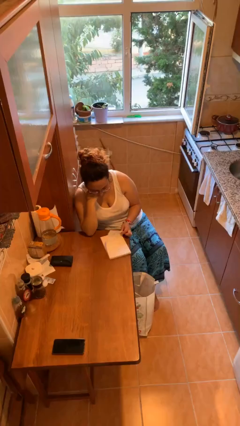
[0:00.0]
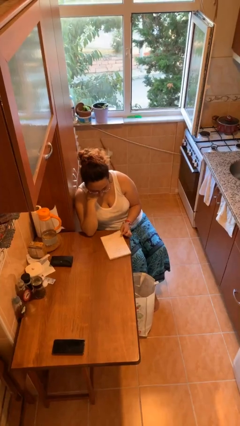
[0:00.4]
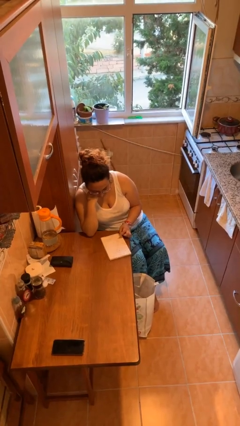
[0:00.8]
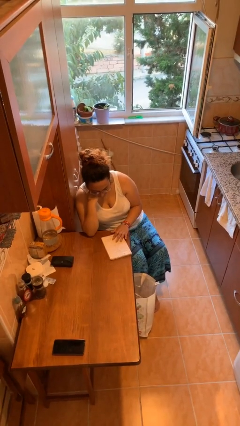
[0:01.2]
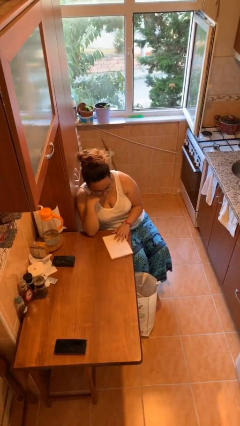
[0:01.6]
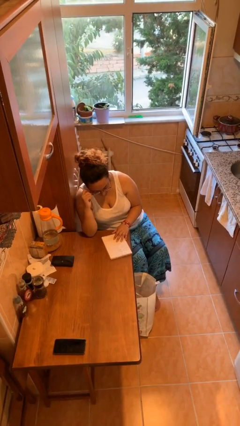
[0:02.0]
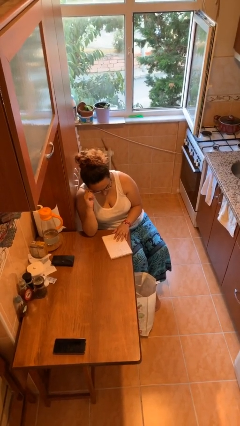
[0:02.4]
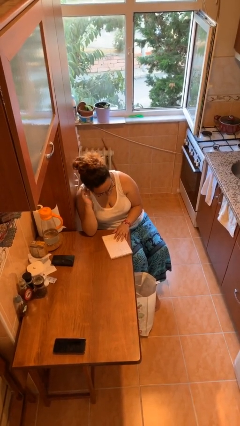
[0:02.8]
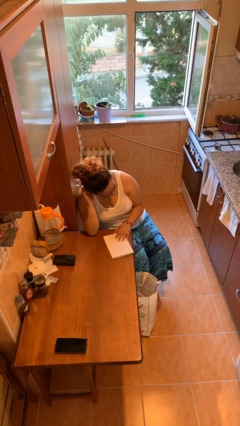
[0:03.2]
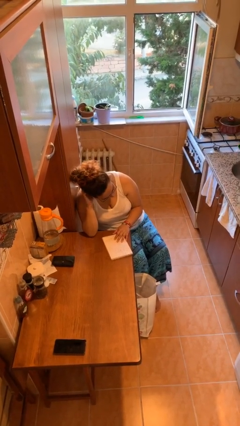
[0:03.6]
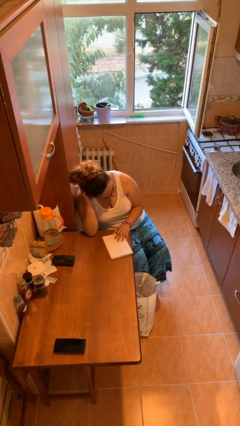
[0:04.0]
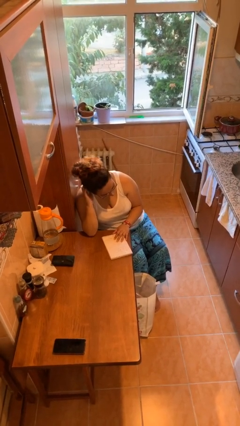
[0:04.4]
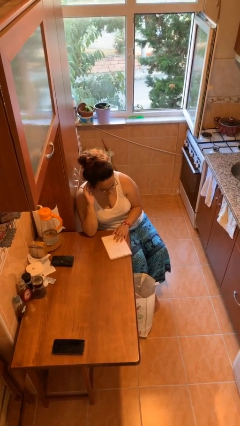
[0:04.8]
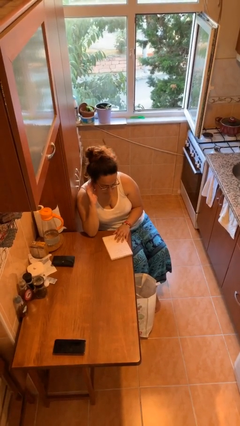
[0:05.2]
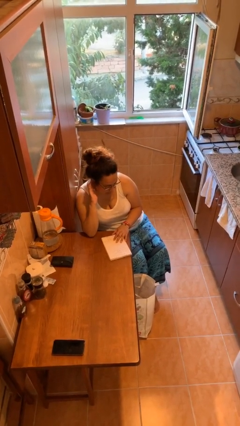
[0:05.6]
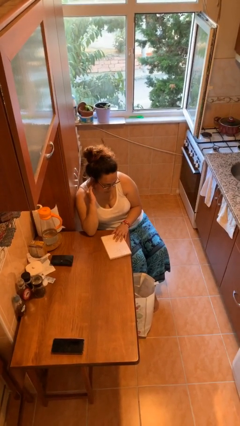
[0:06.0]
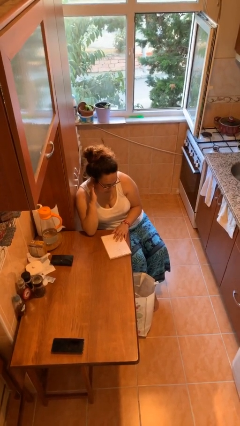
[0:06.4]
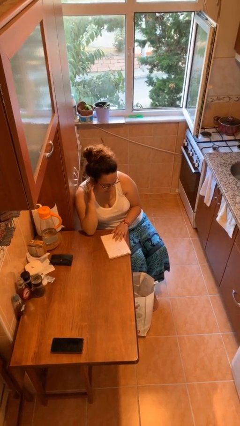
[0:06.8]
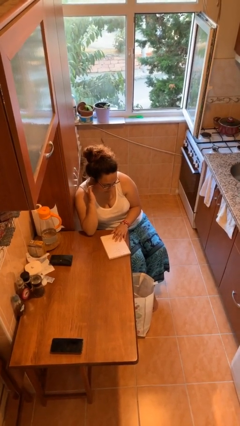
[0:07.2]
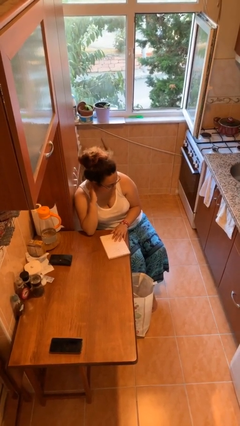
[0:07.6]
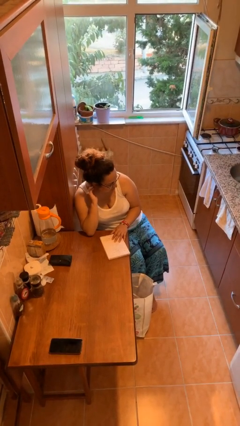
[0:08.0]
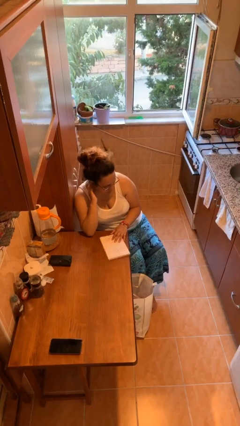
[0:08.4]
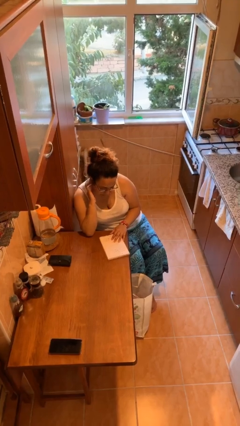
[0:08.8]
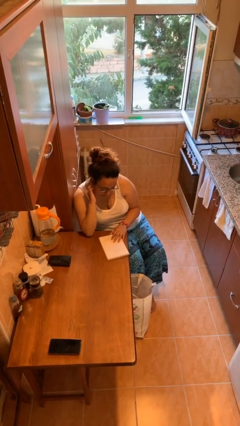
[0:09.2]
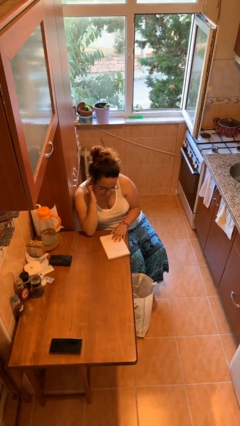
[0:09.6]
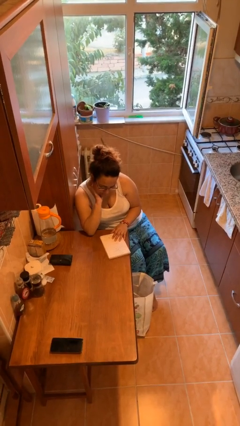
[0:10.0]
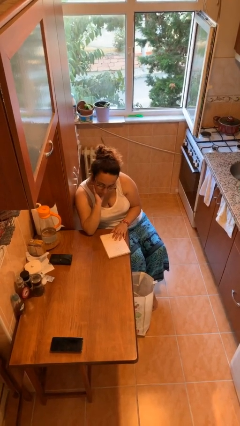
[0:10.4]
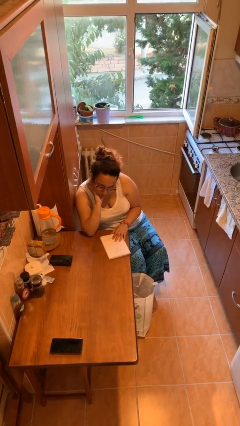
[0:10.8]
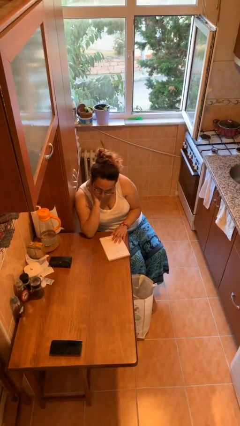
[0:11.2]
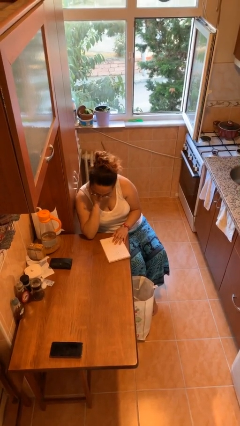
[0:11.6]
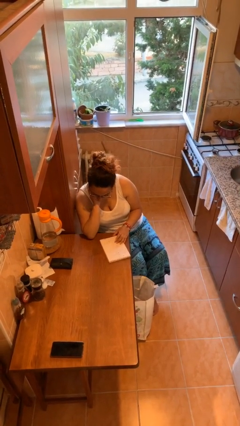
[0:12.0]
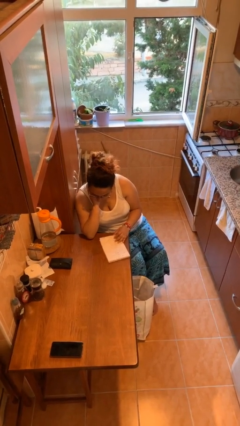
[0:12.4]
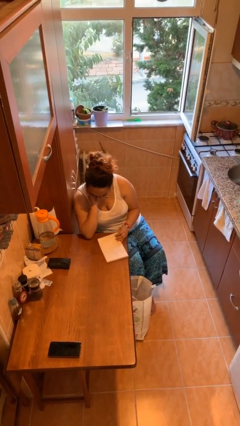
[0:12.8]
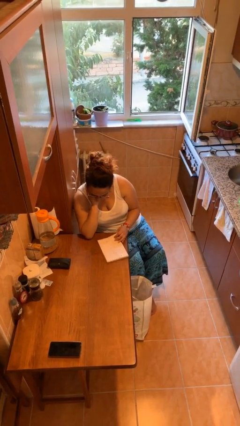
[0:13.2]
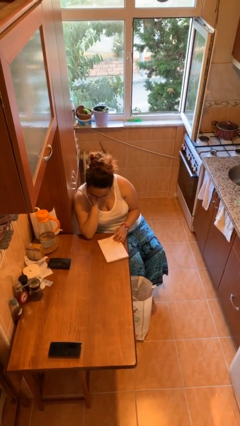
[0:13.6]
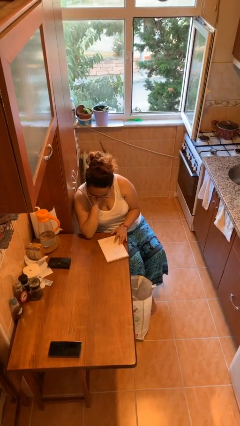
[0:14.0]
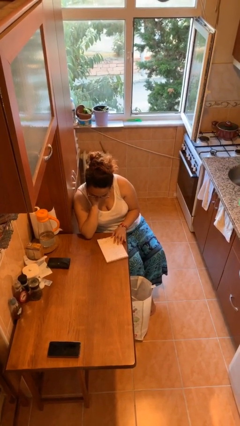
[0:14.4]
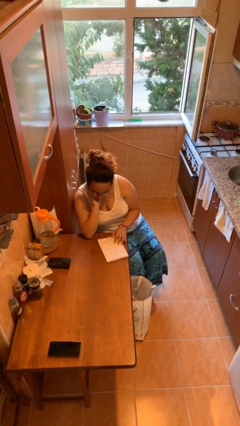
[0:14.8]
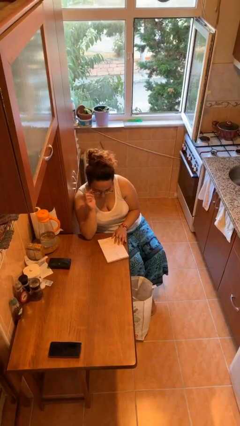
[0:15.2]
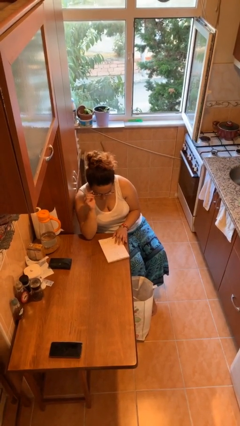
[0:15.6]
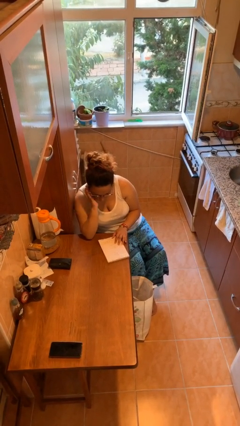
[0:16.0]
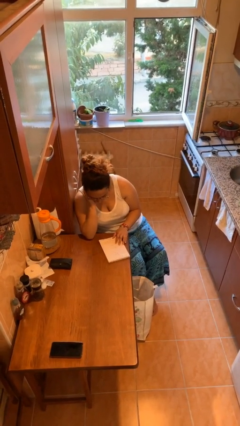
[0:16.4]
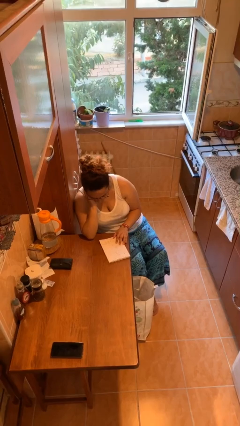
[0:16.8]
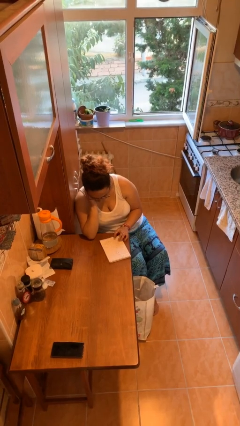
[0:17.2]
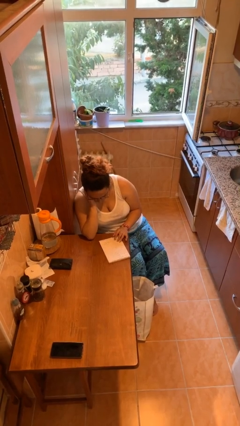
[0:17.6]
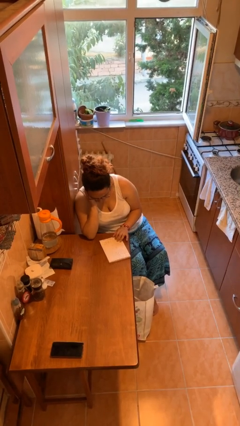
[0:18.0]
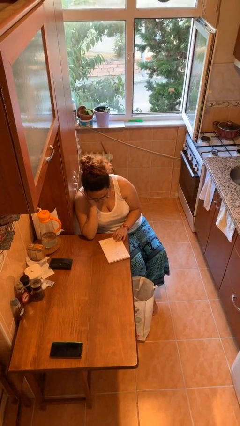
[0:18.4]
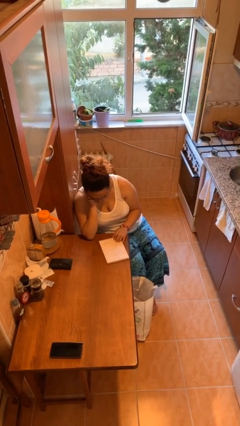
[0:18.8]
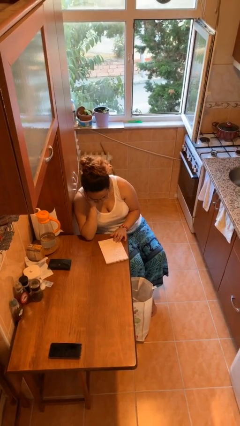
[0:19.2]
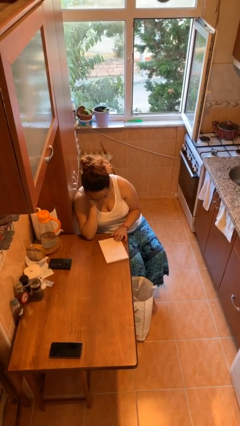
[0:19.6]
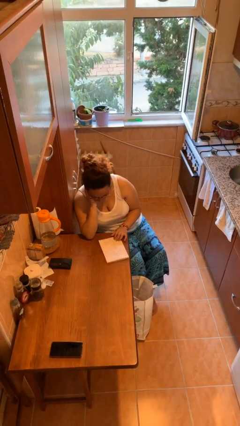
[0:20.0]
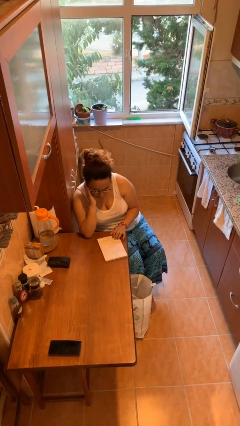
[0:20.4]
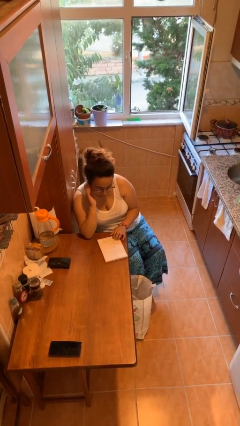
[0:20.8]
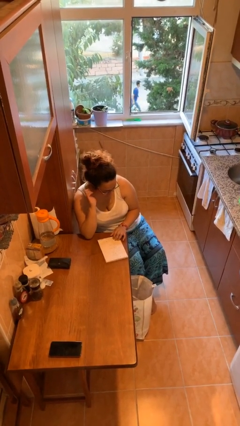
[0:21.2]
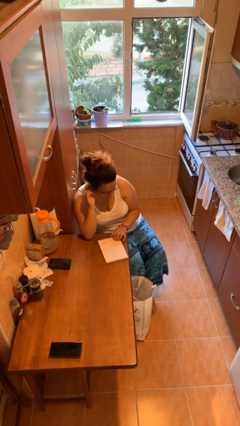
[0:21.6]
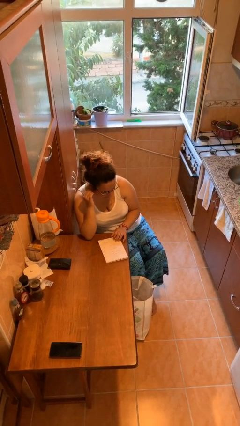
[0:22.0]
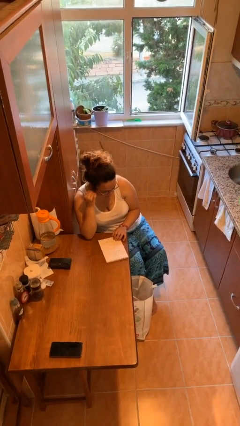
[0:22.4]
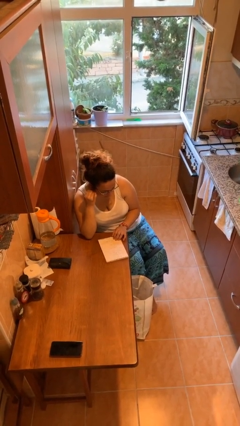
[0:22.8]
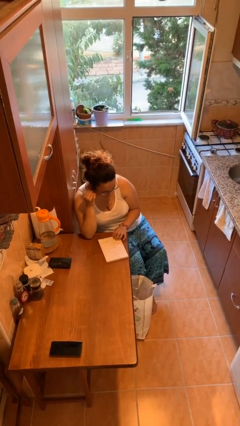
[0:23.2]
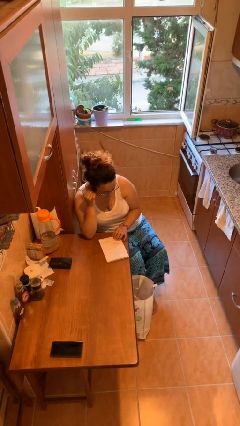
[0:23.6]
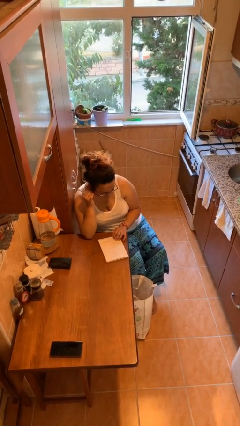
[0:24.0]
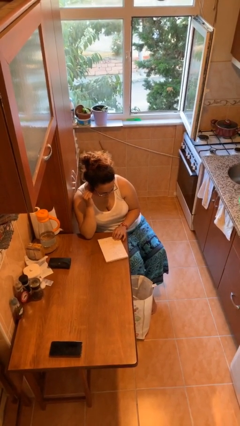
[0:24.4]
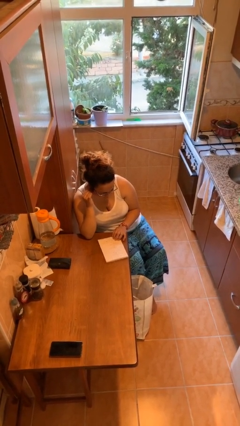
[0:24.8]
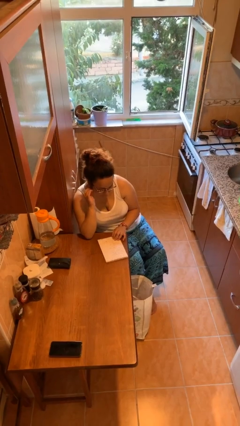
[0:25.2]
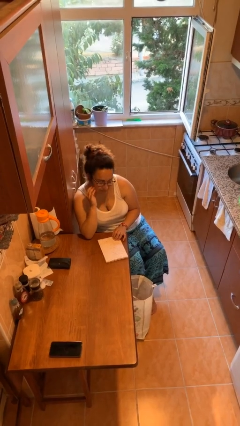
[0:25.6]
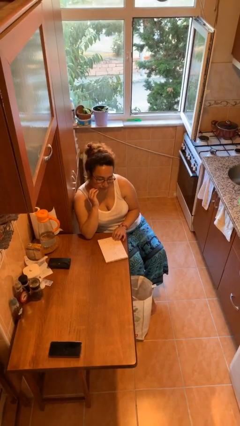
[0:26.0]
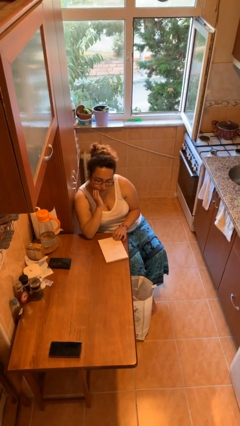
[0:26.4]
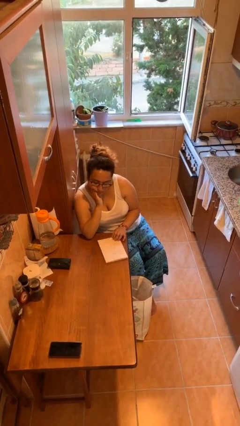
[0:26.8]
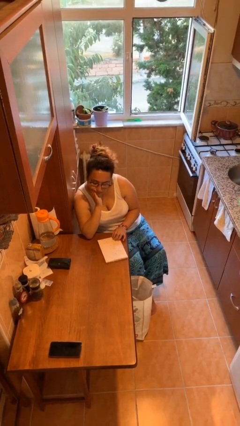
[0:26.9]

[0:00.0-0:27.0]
person reads document

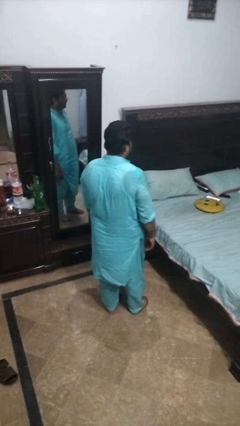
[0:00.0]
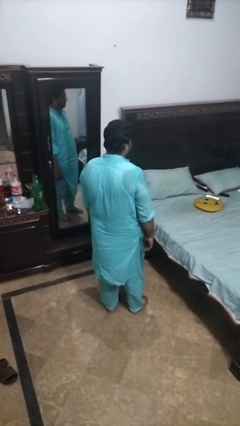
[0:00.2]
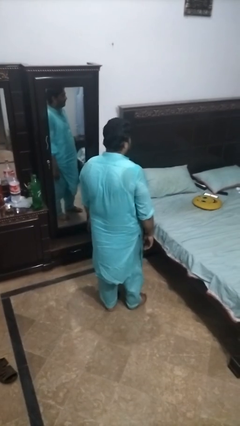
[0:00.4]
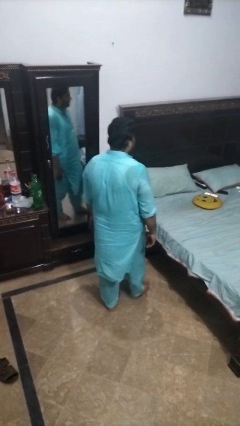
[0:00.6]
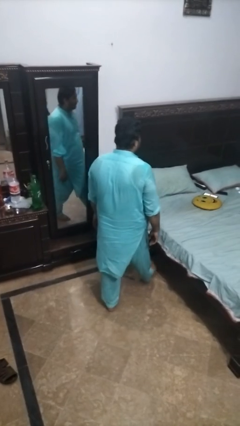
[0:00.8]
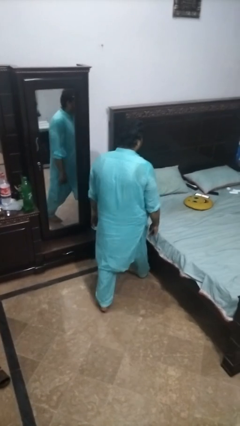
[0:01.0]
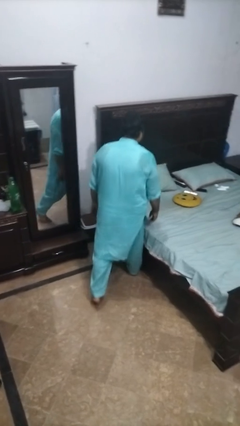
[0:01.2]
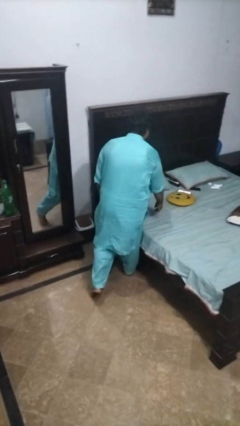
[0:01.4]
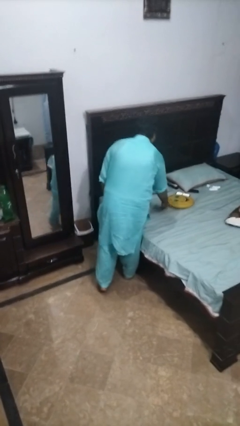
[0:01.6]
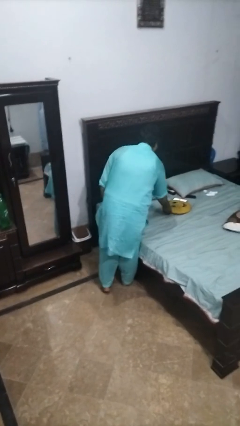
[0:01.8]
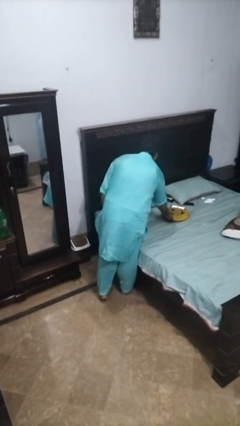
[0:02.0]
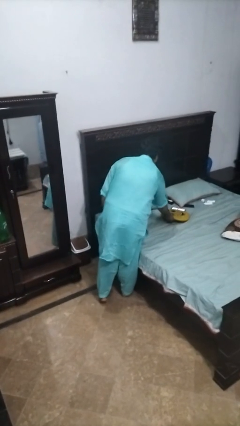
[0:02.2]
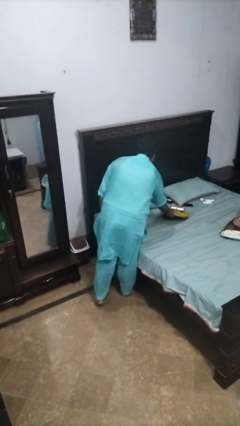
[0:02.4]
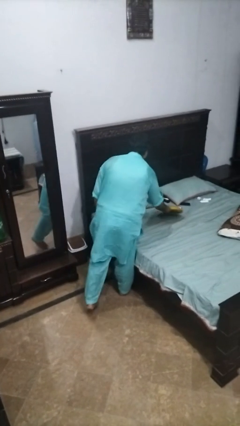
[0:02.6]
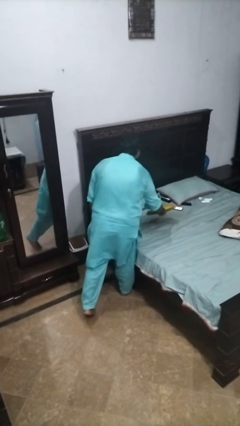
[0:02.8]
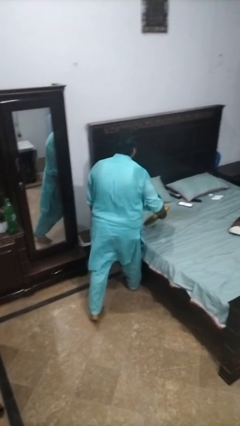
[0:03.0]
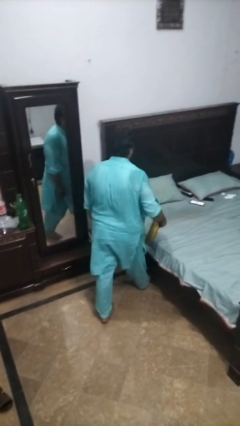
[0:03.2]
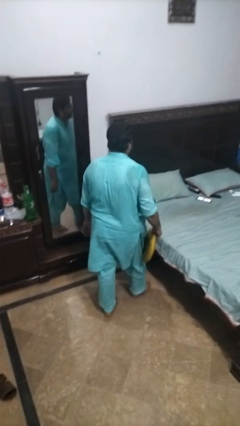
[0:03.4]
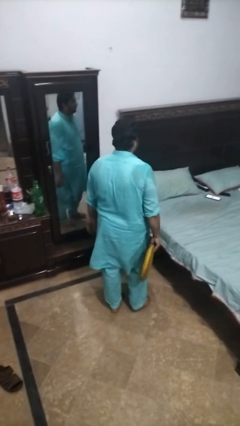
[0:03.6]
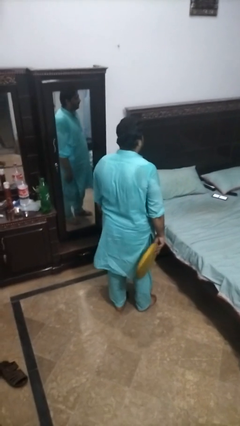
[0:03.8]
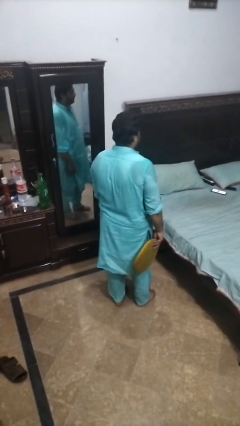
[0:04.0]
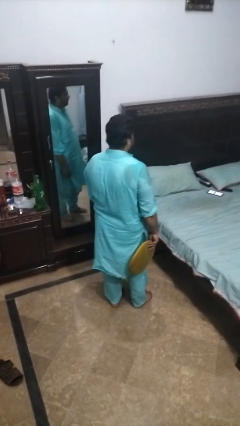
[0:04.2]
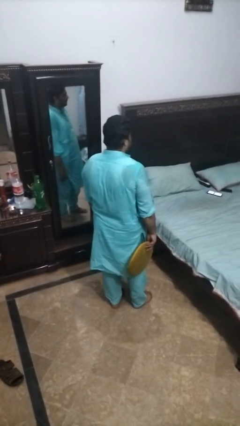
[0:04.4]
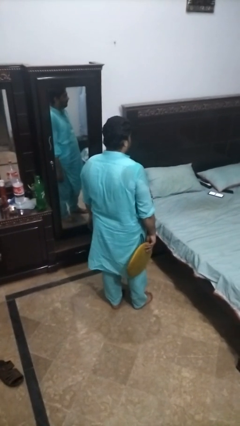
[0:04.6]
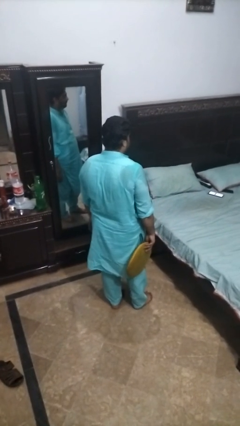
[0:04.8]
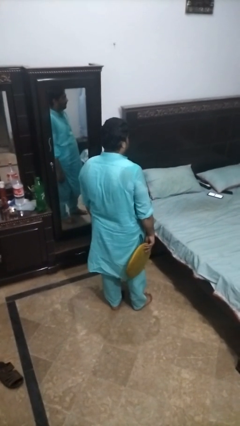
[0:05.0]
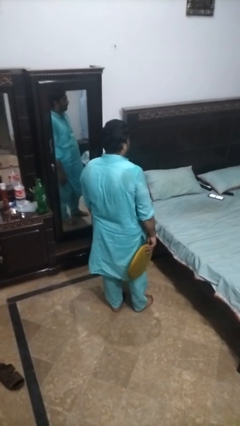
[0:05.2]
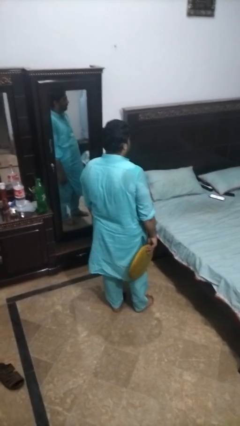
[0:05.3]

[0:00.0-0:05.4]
person picks up object from bed
